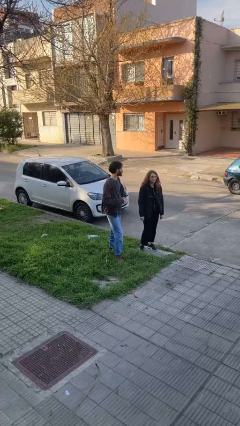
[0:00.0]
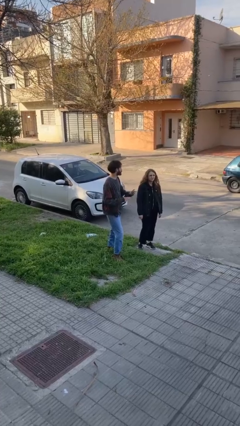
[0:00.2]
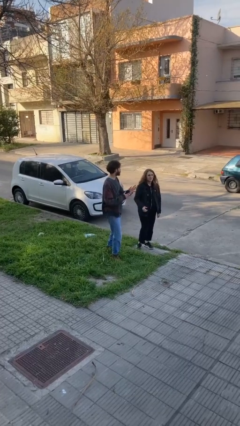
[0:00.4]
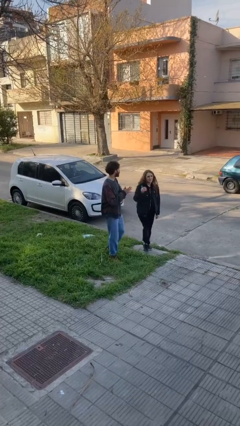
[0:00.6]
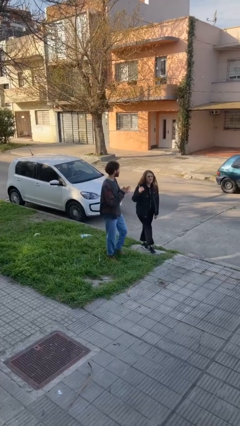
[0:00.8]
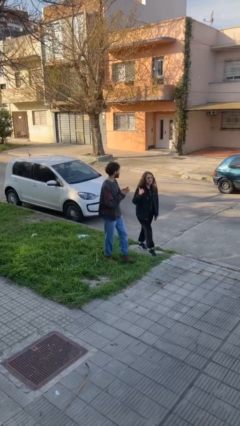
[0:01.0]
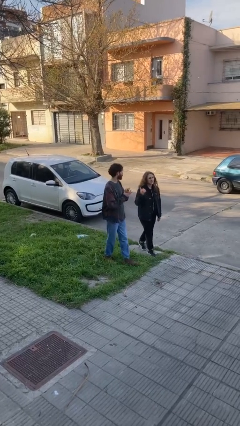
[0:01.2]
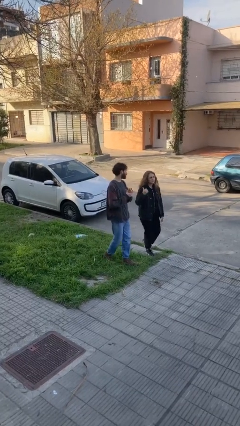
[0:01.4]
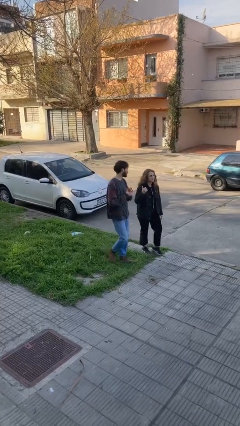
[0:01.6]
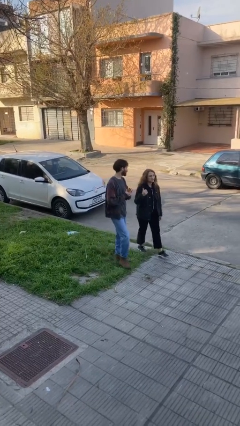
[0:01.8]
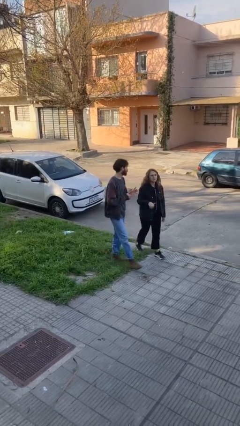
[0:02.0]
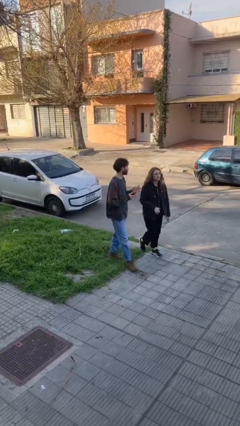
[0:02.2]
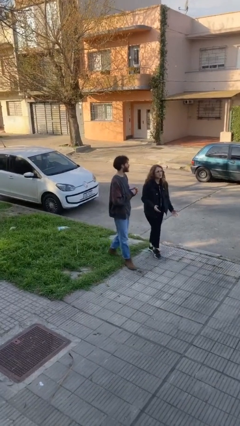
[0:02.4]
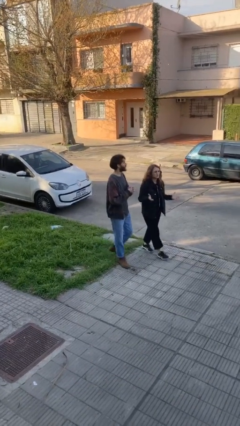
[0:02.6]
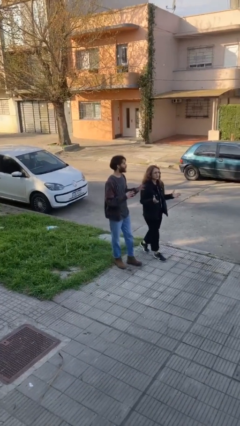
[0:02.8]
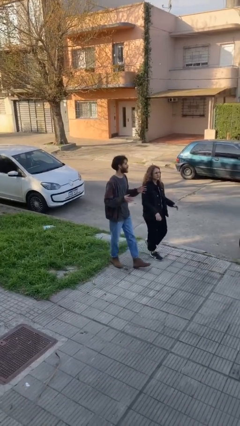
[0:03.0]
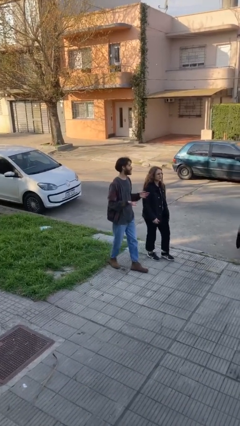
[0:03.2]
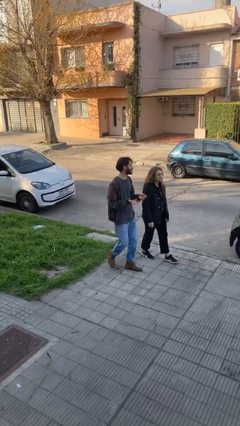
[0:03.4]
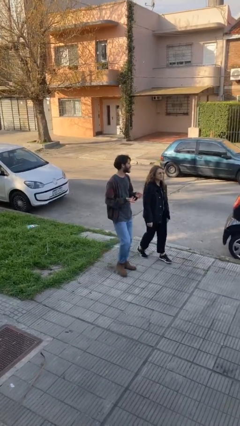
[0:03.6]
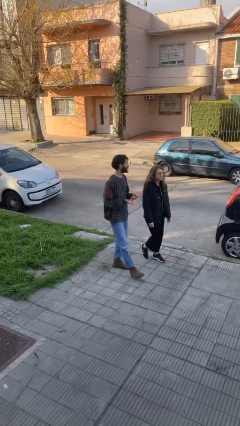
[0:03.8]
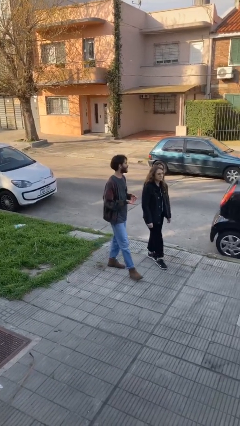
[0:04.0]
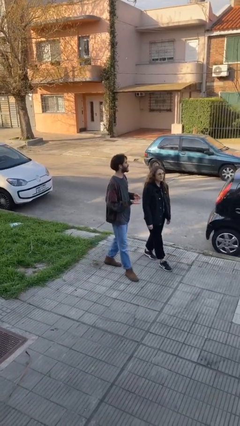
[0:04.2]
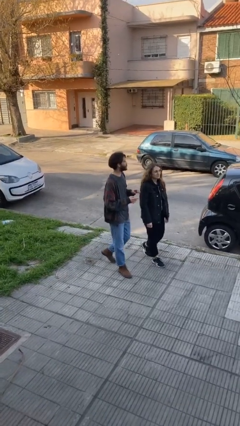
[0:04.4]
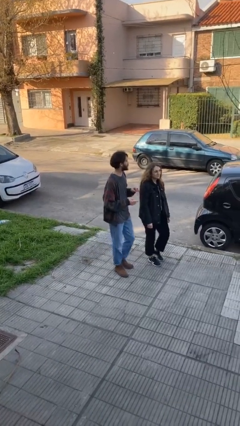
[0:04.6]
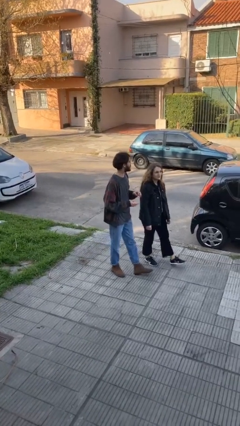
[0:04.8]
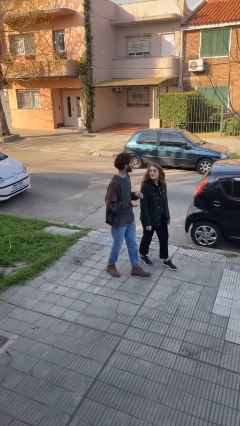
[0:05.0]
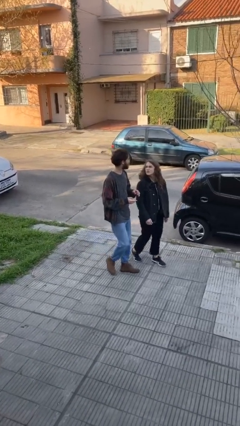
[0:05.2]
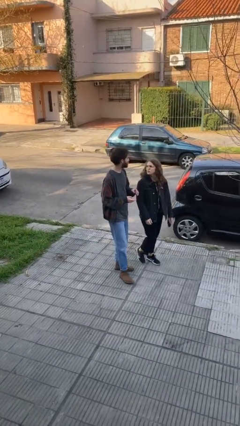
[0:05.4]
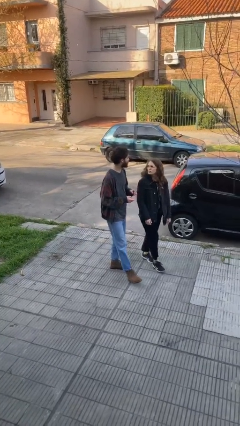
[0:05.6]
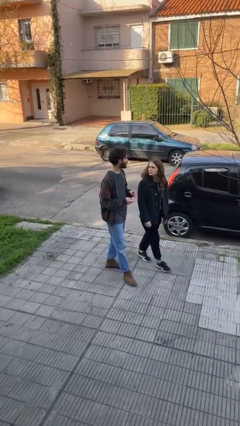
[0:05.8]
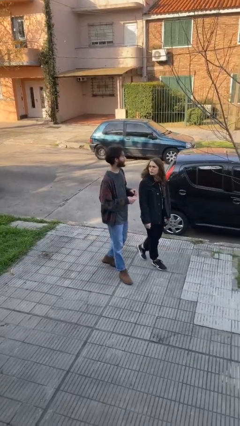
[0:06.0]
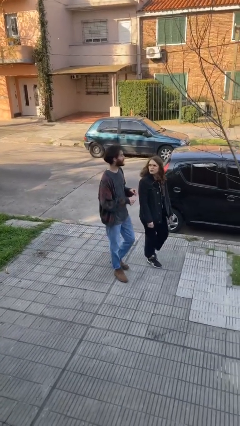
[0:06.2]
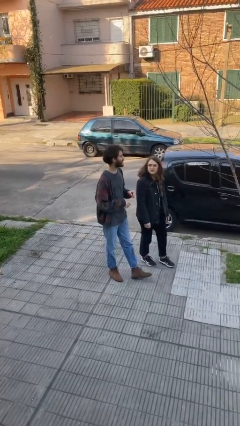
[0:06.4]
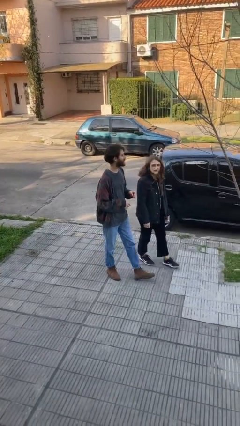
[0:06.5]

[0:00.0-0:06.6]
person talks to person

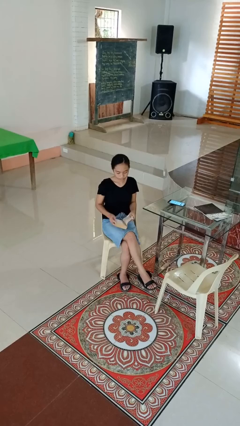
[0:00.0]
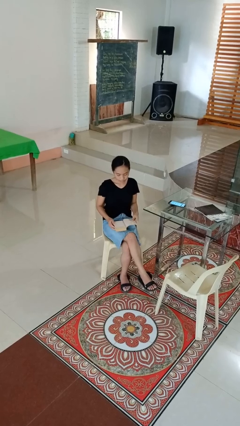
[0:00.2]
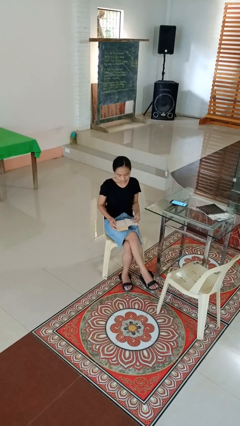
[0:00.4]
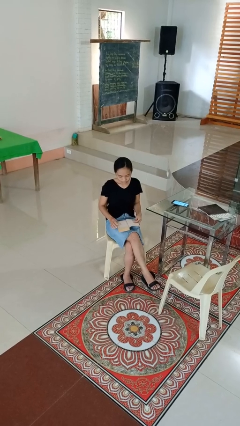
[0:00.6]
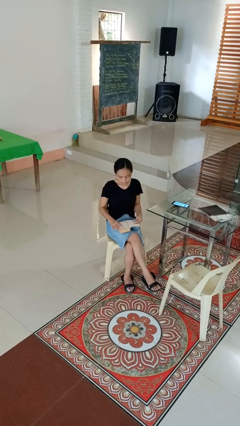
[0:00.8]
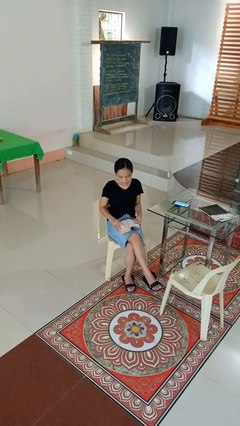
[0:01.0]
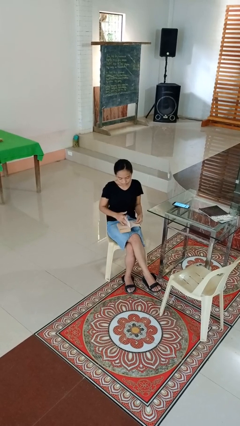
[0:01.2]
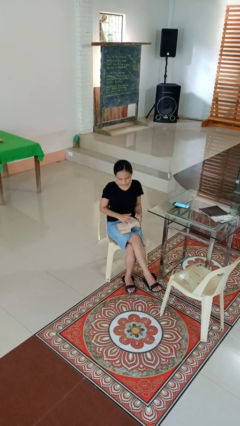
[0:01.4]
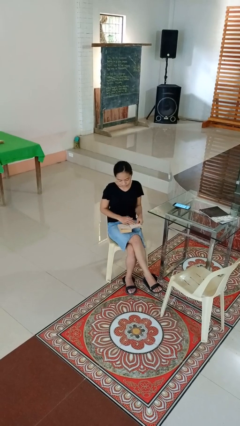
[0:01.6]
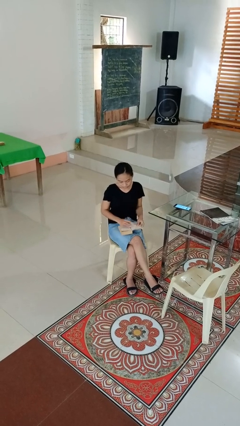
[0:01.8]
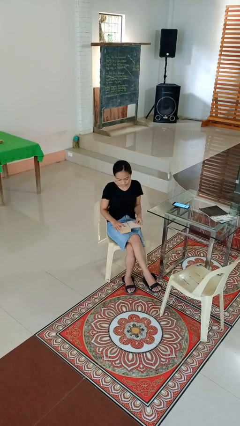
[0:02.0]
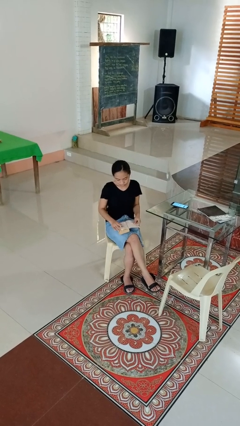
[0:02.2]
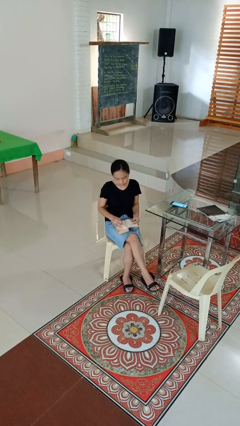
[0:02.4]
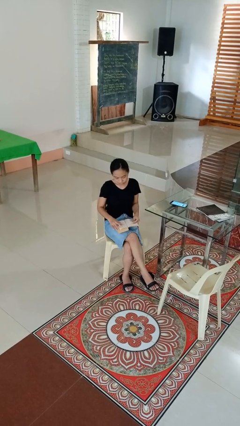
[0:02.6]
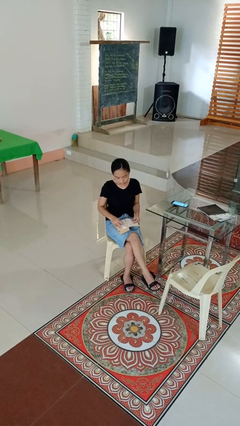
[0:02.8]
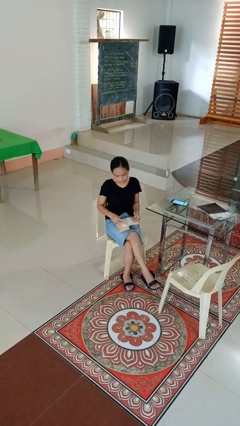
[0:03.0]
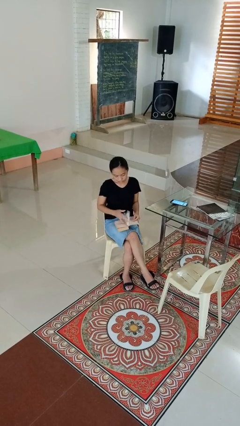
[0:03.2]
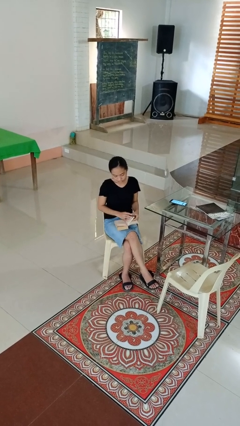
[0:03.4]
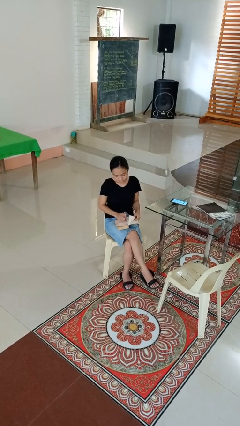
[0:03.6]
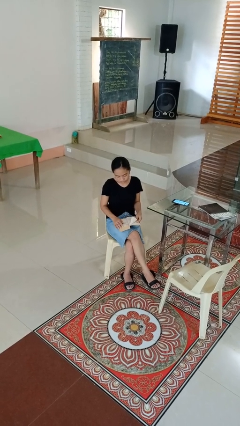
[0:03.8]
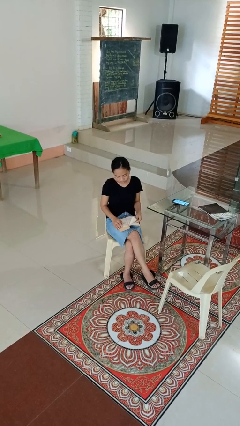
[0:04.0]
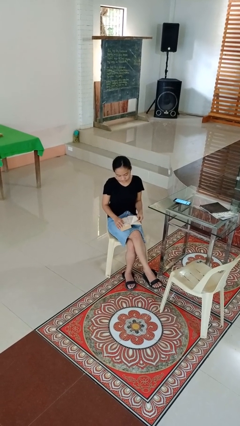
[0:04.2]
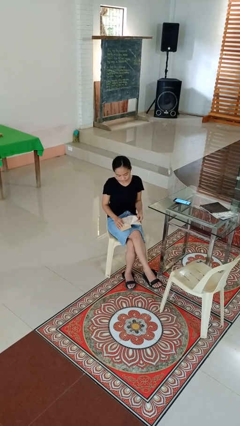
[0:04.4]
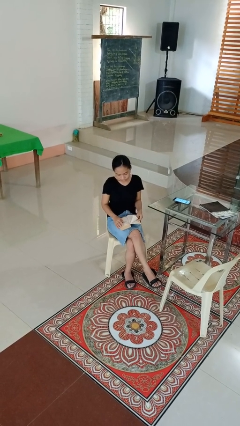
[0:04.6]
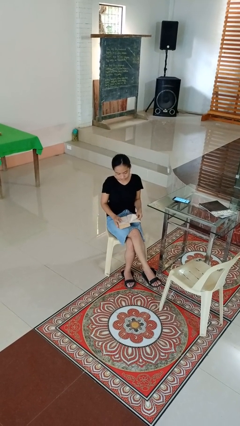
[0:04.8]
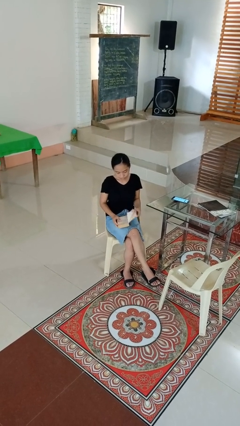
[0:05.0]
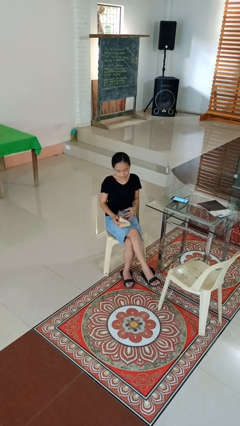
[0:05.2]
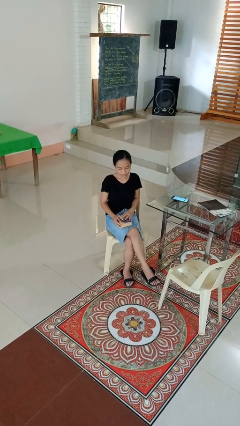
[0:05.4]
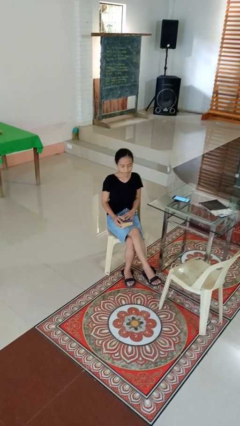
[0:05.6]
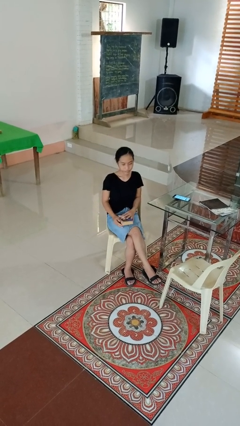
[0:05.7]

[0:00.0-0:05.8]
person reads book

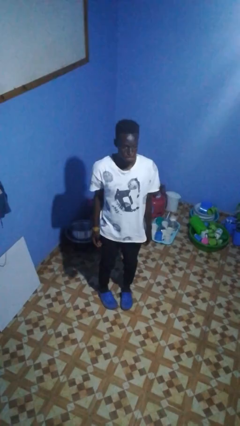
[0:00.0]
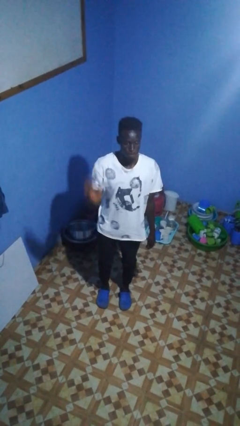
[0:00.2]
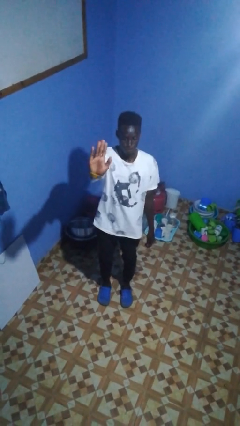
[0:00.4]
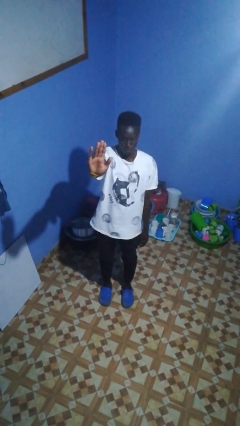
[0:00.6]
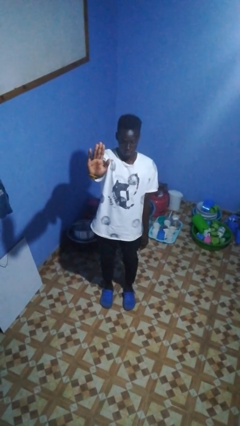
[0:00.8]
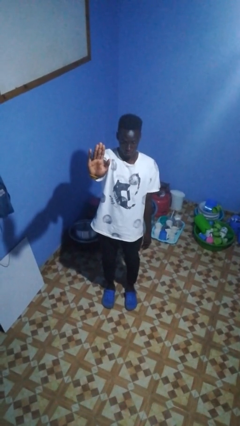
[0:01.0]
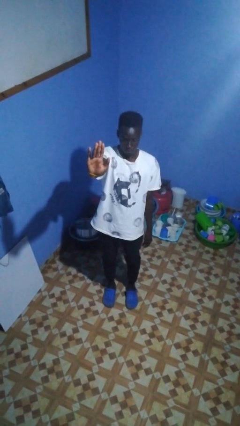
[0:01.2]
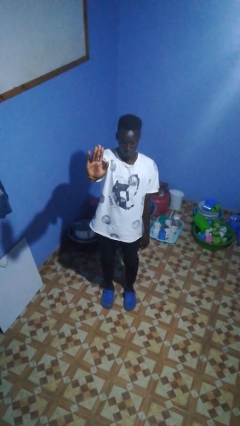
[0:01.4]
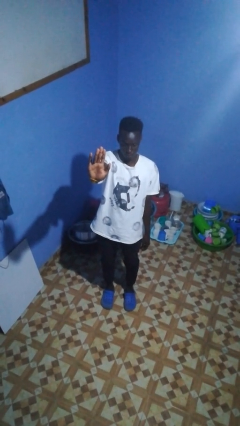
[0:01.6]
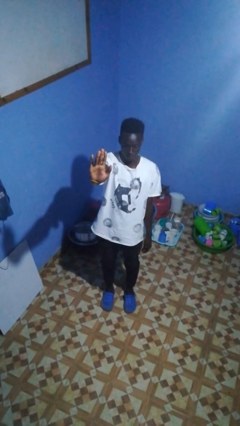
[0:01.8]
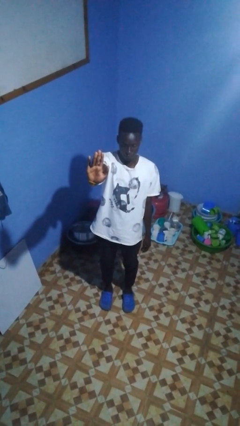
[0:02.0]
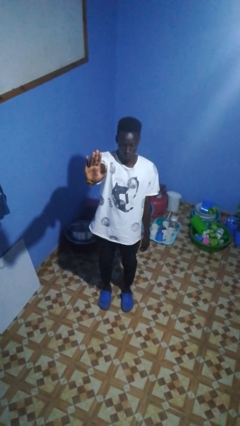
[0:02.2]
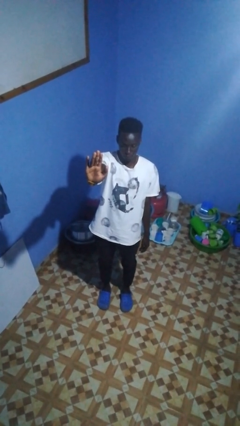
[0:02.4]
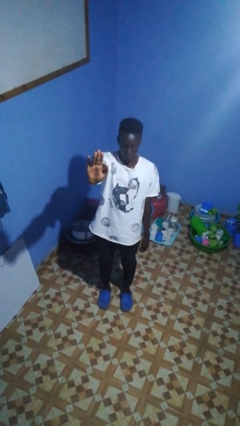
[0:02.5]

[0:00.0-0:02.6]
person gestures stop

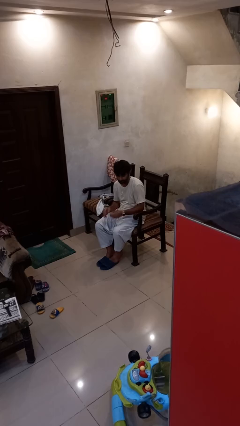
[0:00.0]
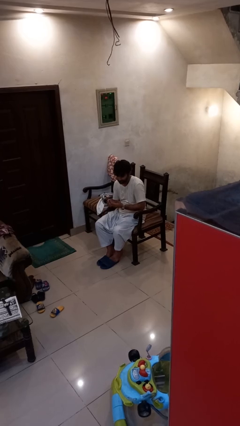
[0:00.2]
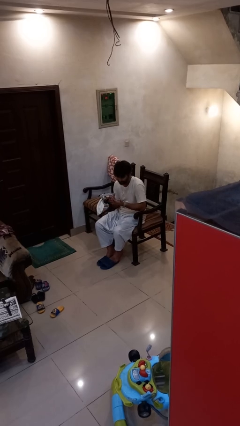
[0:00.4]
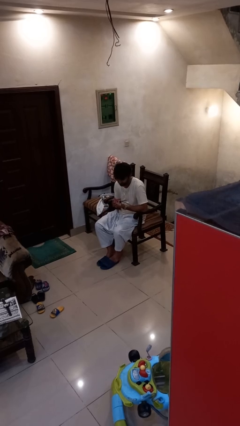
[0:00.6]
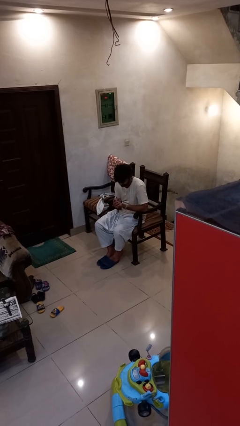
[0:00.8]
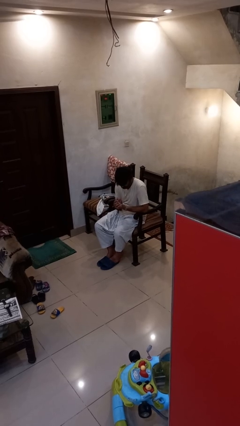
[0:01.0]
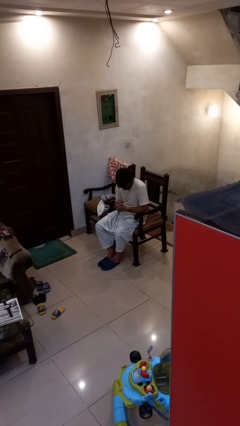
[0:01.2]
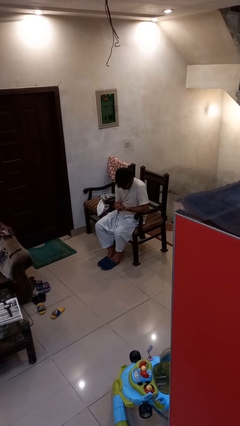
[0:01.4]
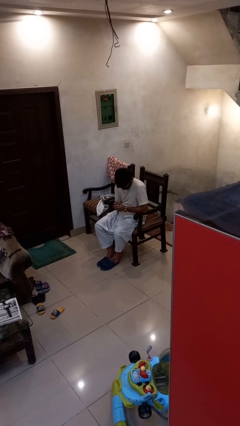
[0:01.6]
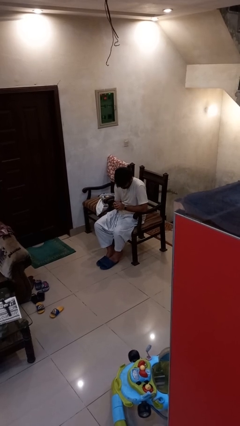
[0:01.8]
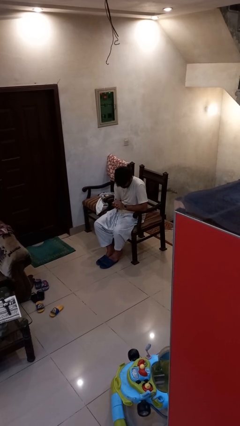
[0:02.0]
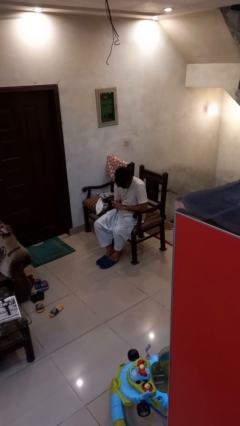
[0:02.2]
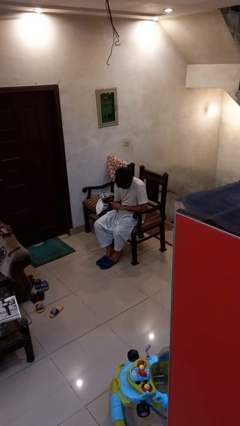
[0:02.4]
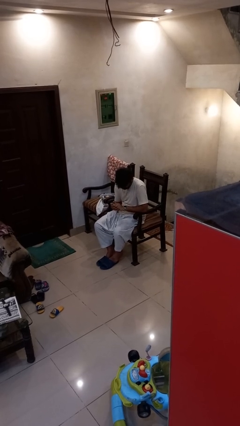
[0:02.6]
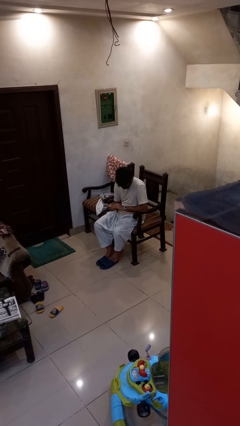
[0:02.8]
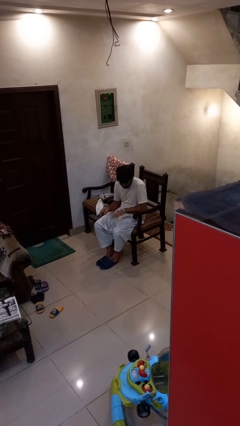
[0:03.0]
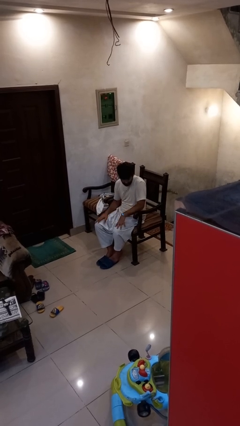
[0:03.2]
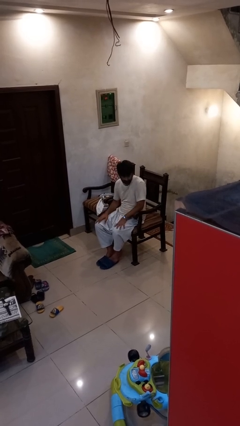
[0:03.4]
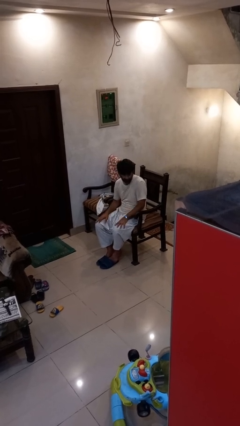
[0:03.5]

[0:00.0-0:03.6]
person looks at hands in lap
